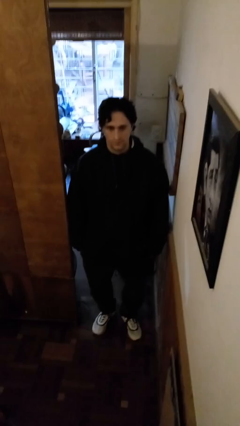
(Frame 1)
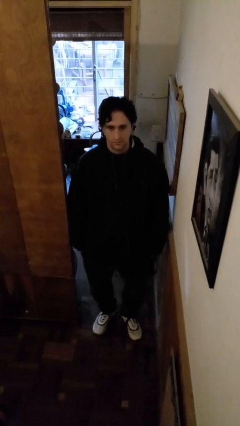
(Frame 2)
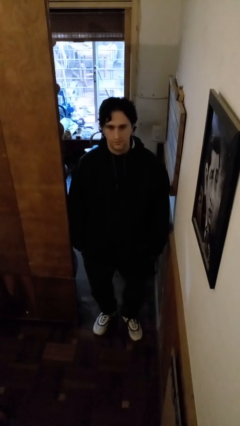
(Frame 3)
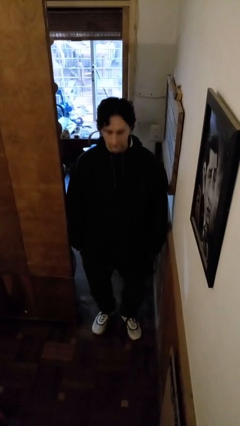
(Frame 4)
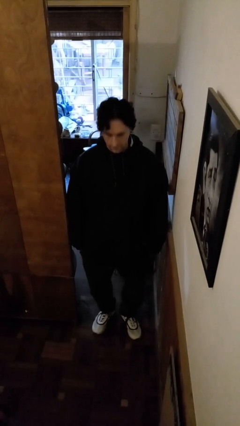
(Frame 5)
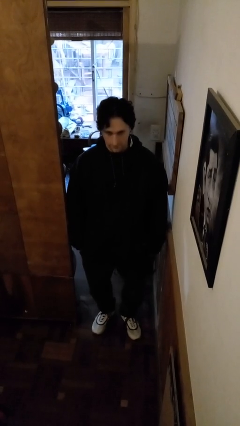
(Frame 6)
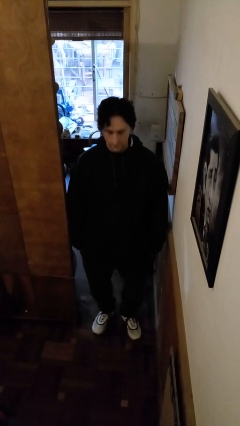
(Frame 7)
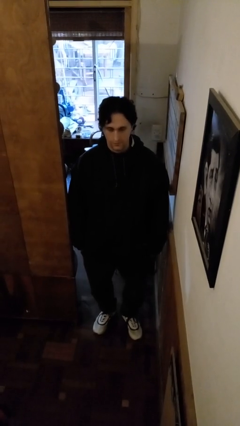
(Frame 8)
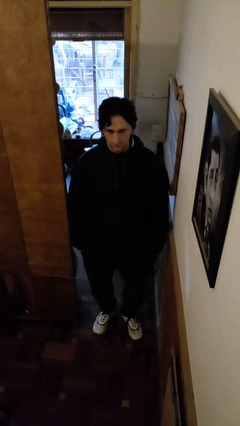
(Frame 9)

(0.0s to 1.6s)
person nods head

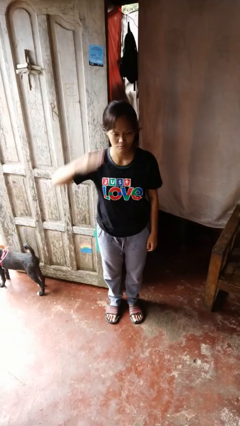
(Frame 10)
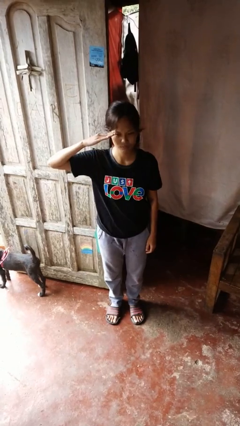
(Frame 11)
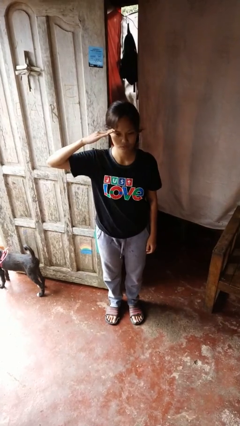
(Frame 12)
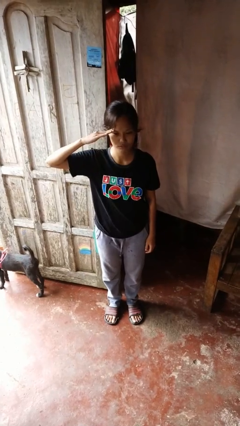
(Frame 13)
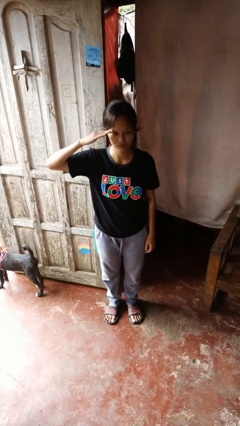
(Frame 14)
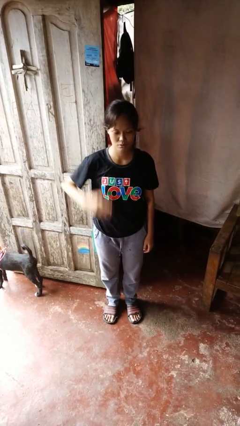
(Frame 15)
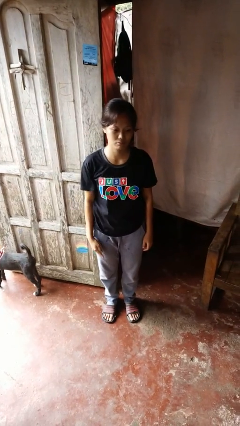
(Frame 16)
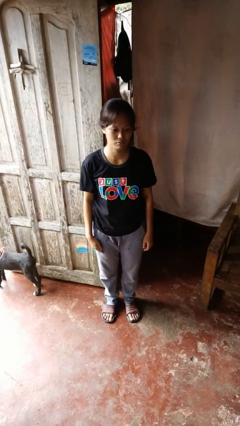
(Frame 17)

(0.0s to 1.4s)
person salutes

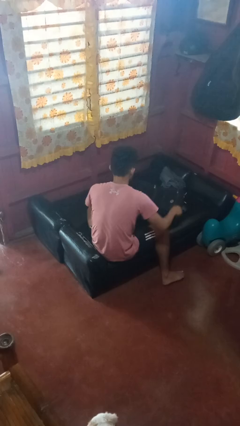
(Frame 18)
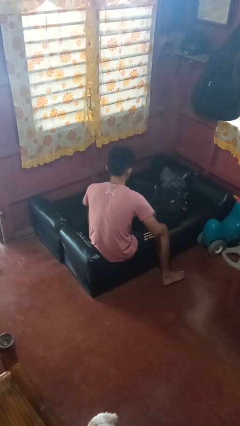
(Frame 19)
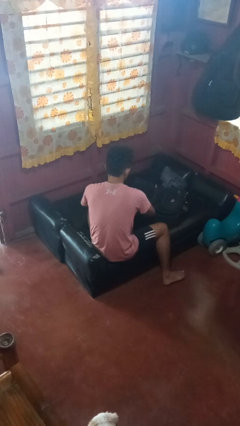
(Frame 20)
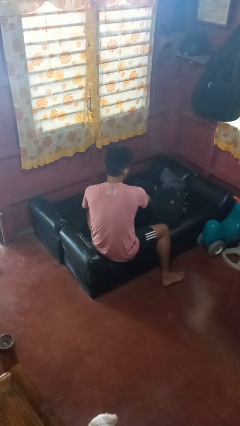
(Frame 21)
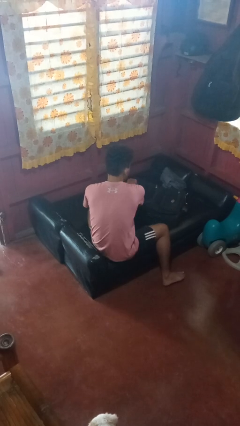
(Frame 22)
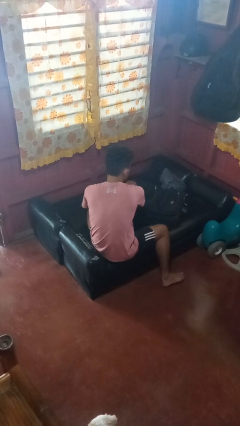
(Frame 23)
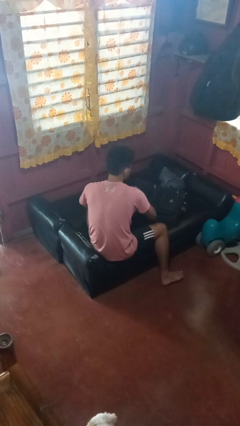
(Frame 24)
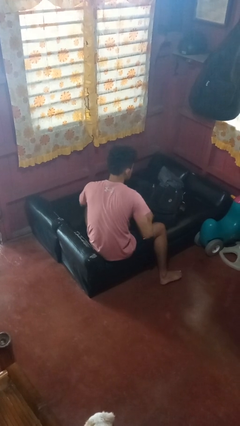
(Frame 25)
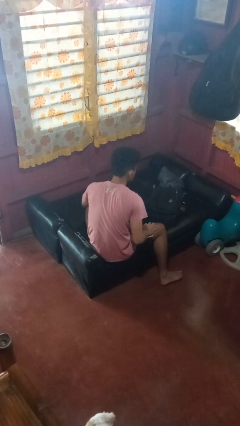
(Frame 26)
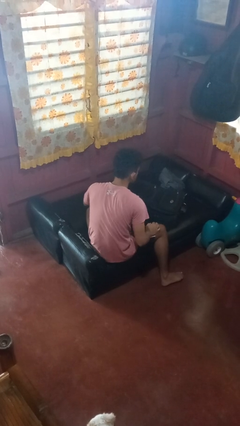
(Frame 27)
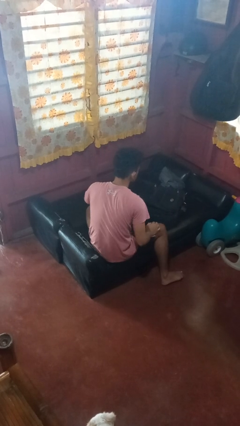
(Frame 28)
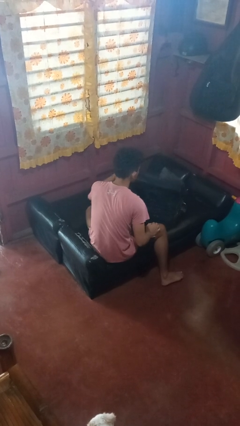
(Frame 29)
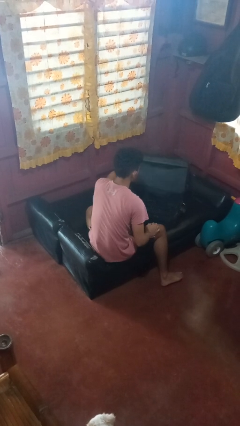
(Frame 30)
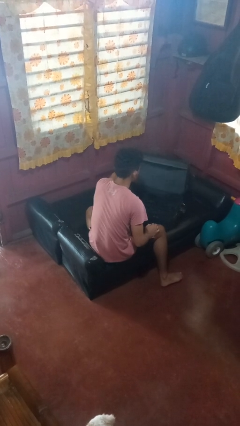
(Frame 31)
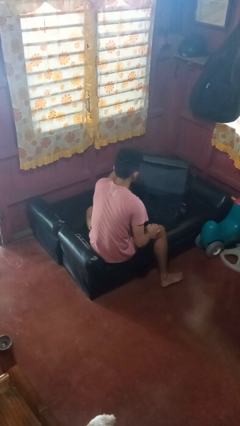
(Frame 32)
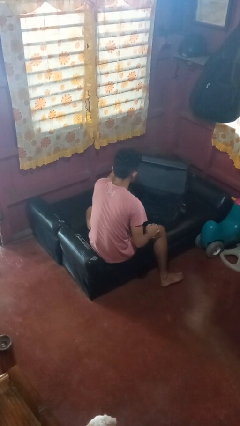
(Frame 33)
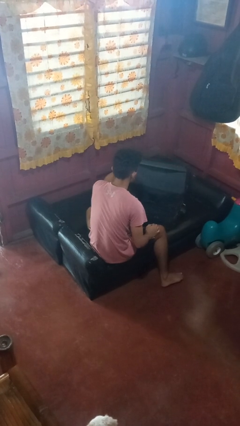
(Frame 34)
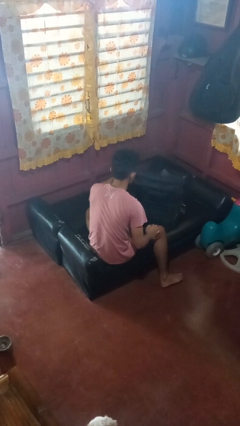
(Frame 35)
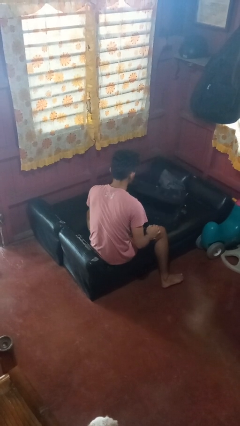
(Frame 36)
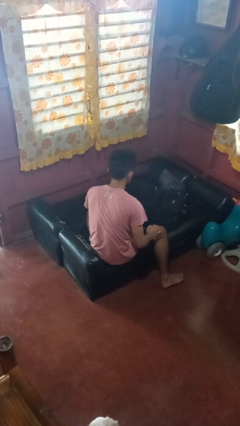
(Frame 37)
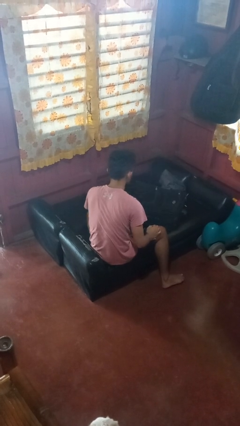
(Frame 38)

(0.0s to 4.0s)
person opens suitcase

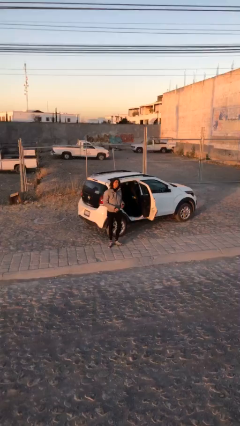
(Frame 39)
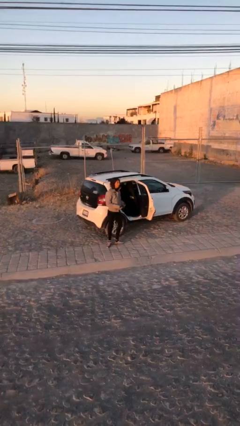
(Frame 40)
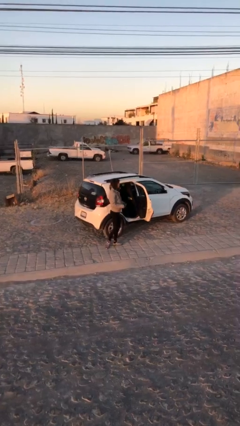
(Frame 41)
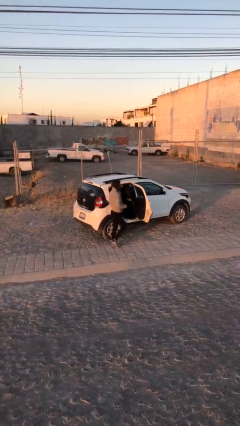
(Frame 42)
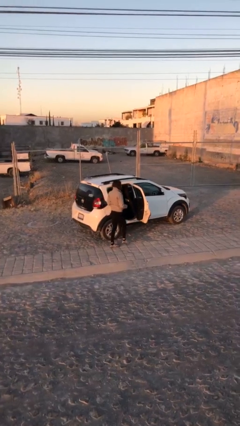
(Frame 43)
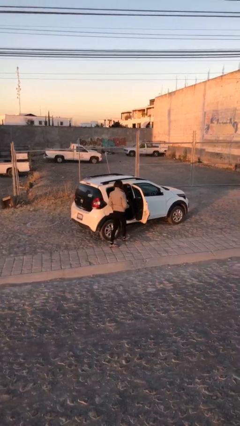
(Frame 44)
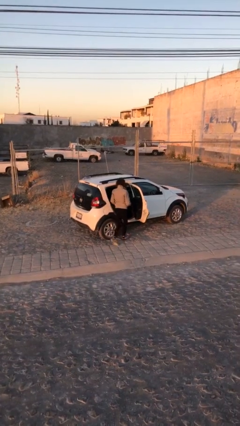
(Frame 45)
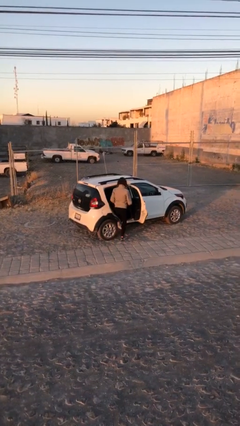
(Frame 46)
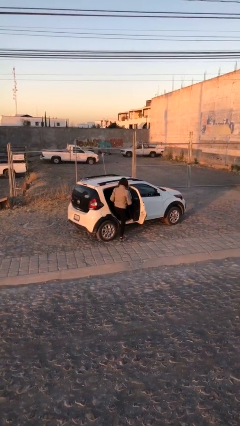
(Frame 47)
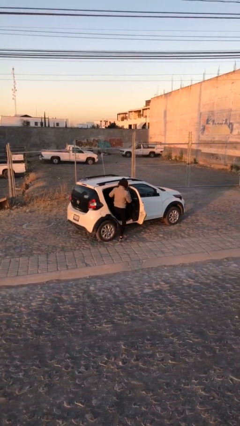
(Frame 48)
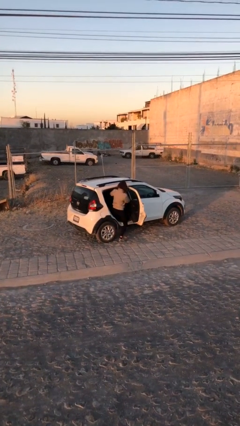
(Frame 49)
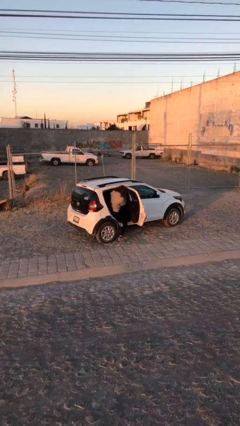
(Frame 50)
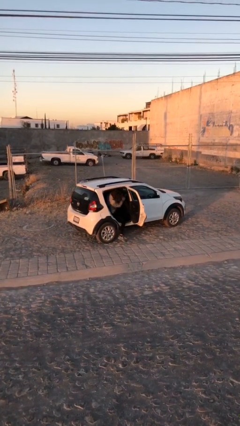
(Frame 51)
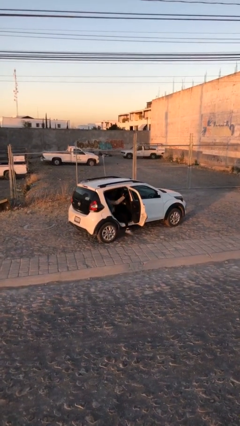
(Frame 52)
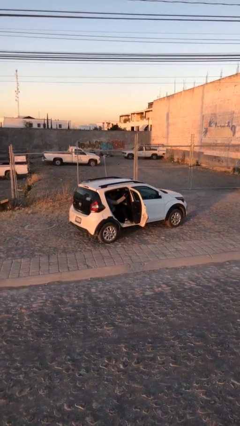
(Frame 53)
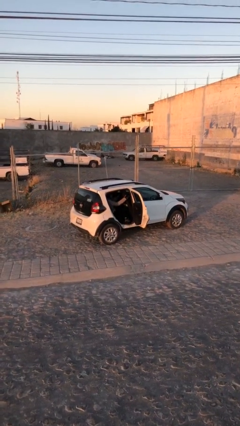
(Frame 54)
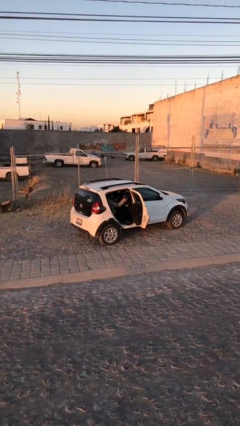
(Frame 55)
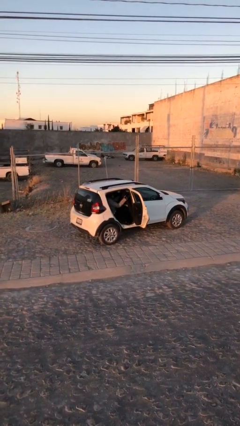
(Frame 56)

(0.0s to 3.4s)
person enters car

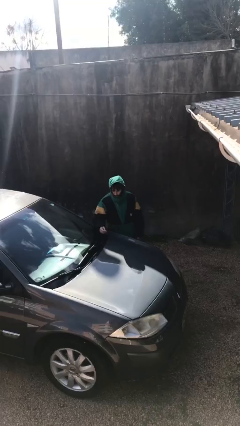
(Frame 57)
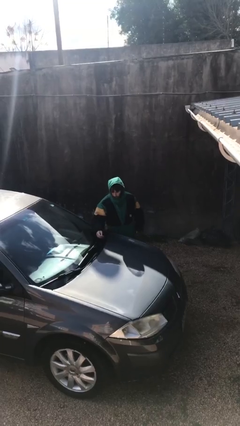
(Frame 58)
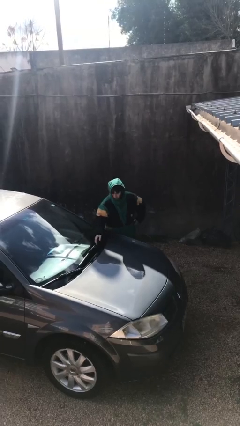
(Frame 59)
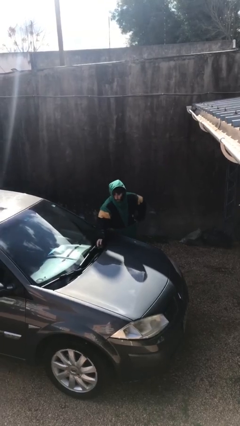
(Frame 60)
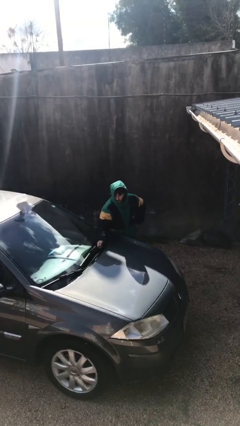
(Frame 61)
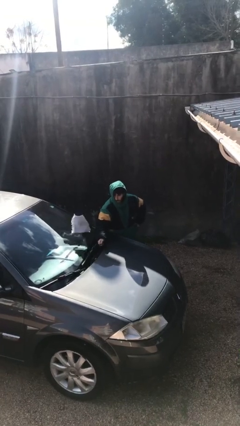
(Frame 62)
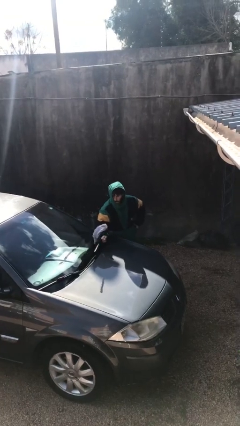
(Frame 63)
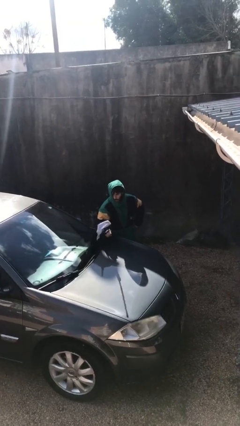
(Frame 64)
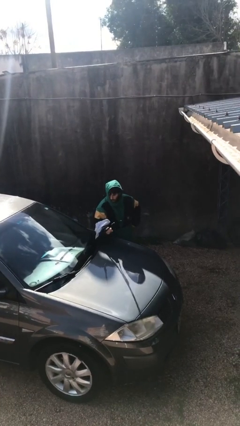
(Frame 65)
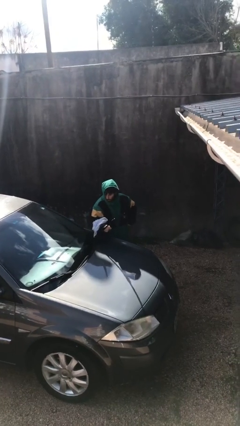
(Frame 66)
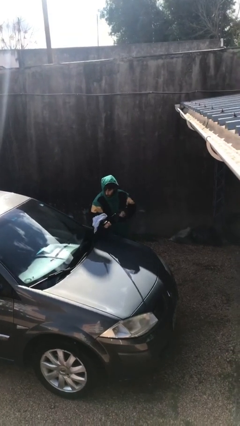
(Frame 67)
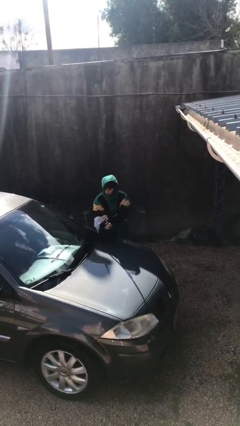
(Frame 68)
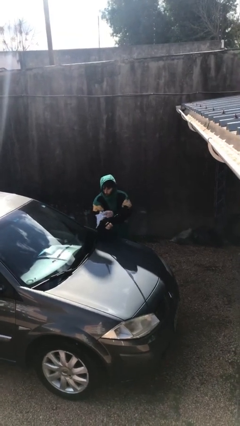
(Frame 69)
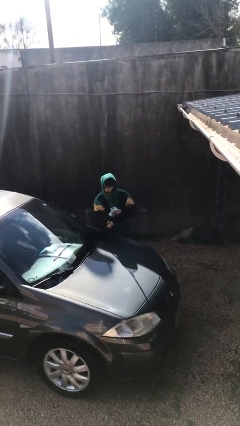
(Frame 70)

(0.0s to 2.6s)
person flips up car wipers

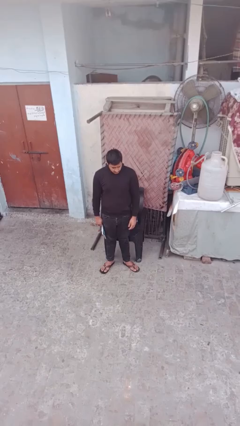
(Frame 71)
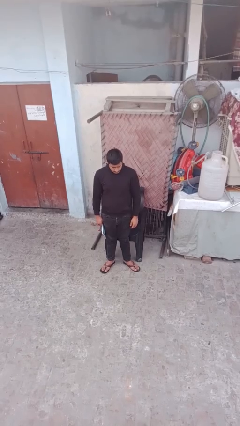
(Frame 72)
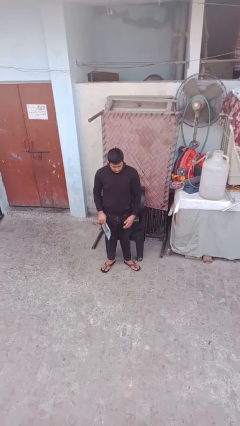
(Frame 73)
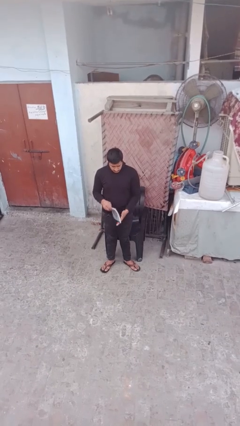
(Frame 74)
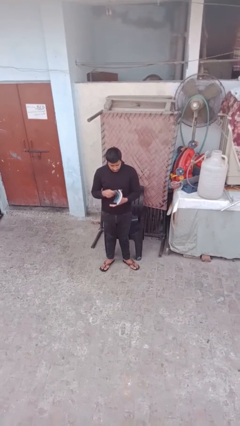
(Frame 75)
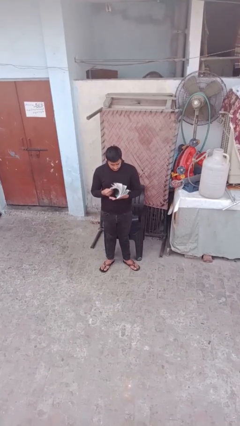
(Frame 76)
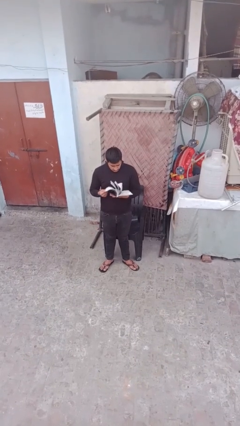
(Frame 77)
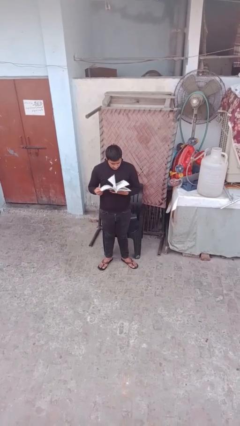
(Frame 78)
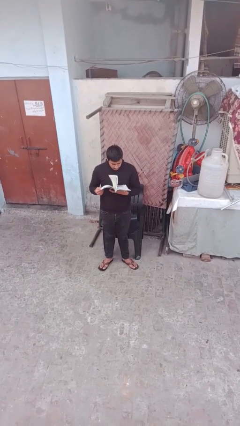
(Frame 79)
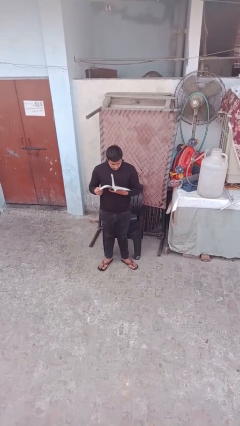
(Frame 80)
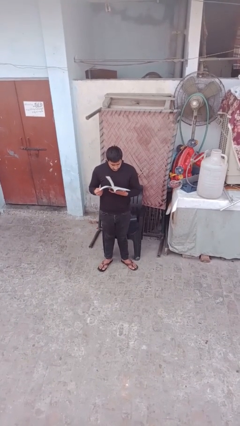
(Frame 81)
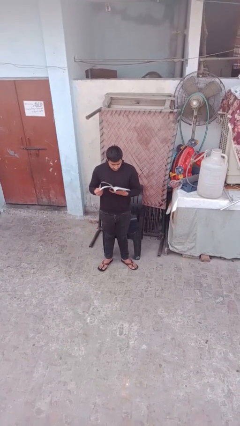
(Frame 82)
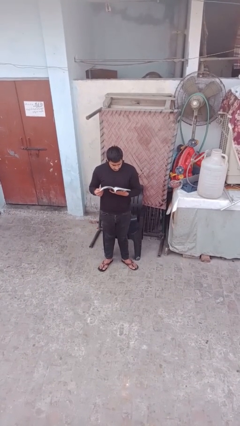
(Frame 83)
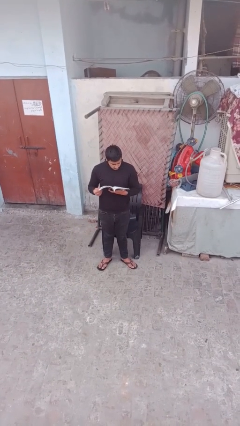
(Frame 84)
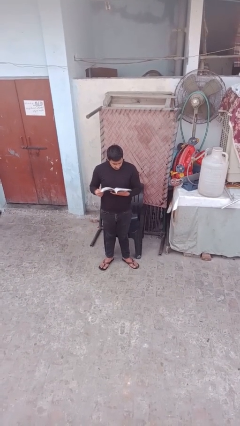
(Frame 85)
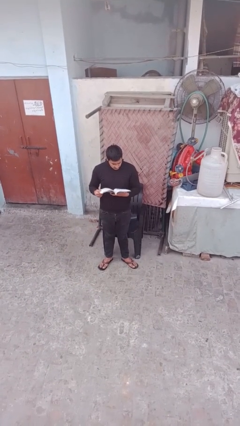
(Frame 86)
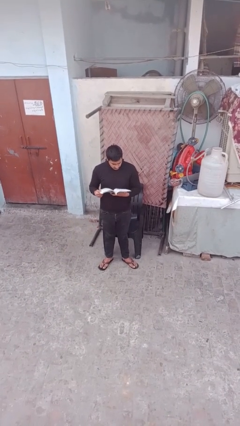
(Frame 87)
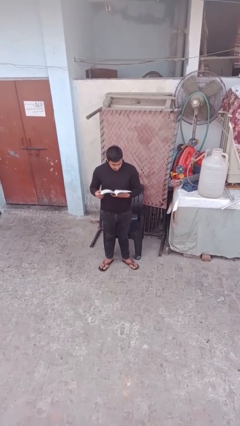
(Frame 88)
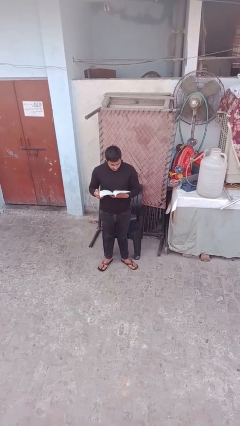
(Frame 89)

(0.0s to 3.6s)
person reads document

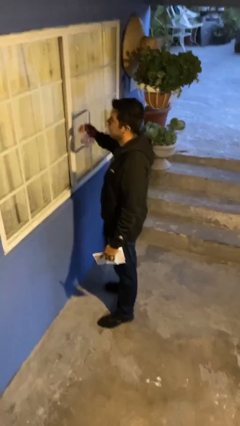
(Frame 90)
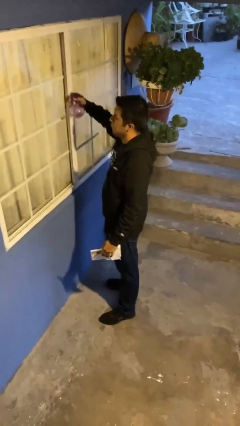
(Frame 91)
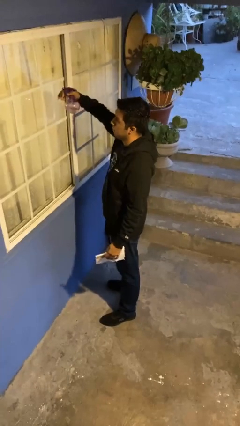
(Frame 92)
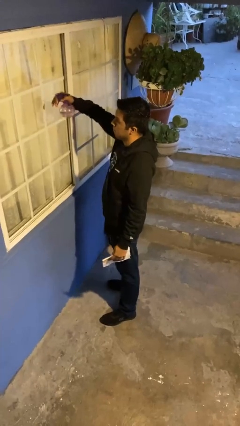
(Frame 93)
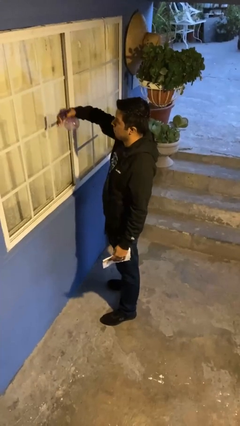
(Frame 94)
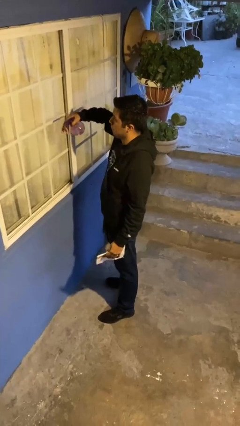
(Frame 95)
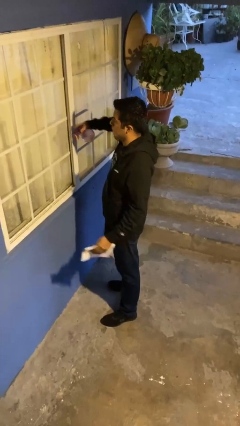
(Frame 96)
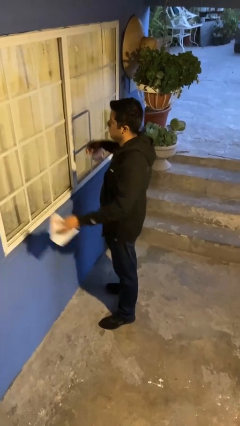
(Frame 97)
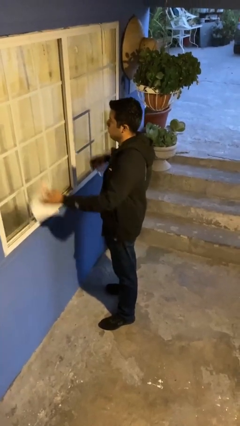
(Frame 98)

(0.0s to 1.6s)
person sprays from bottle
